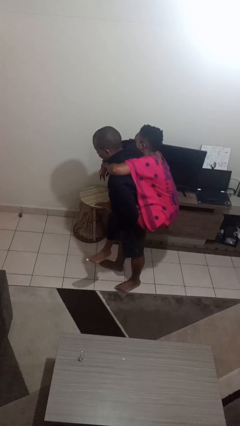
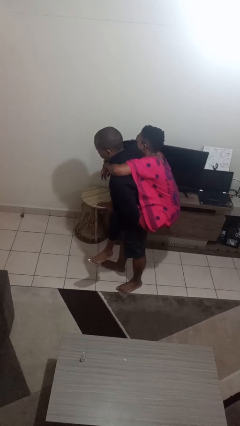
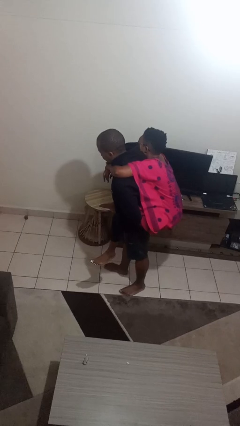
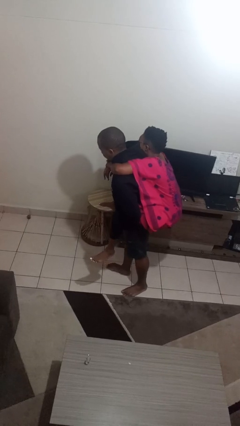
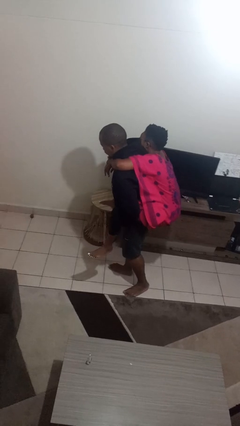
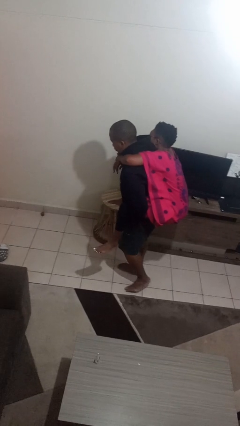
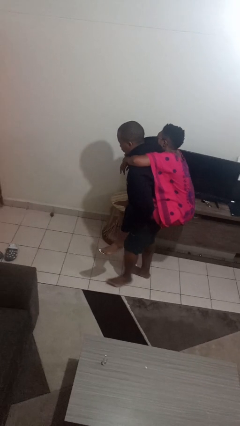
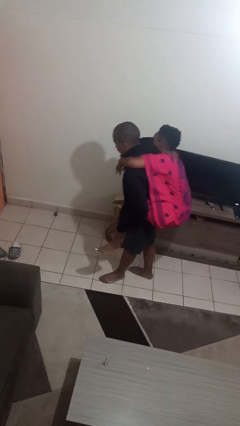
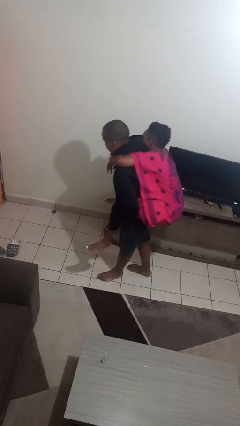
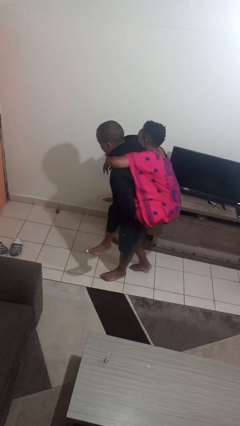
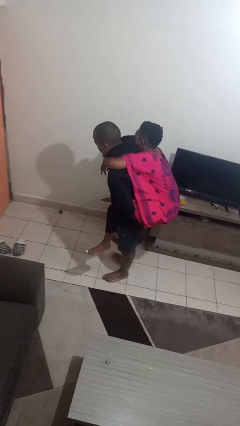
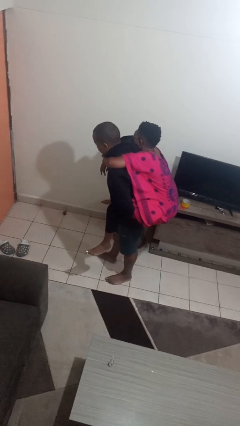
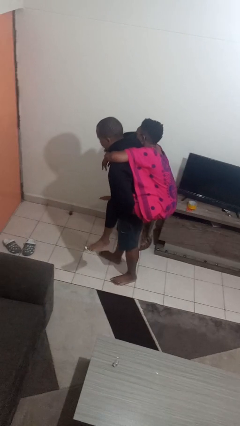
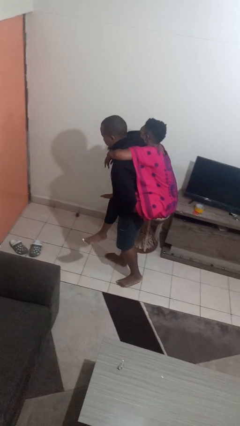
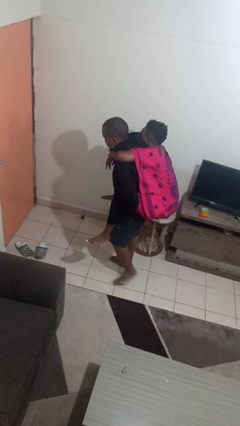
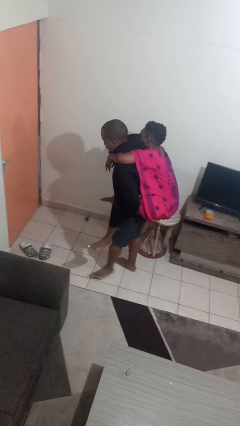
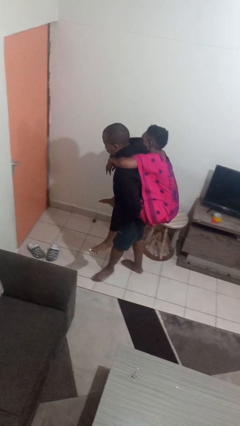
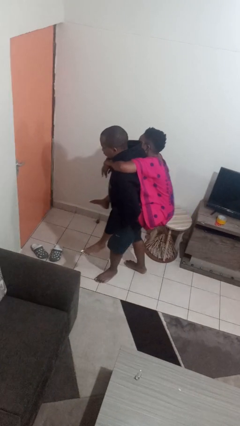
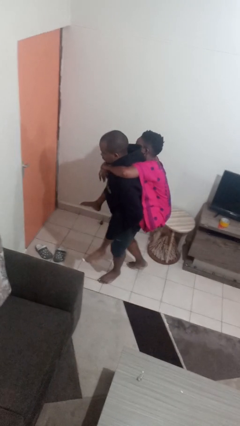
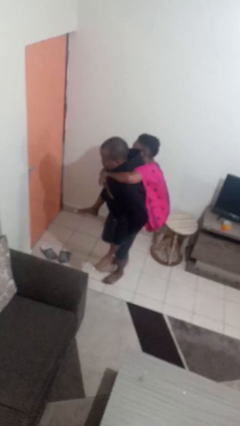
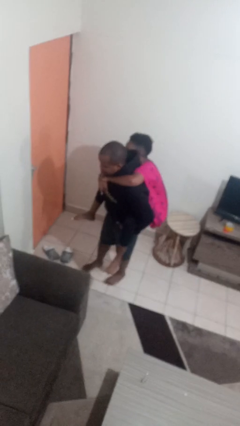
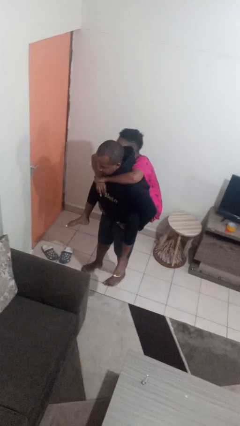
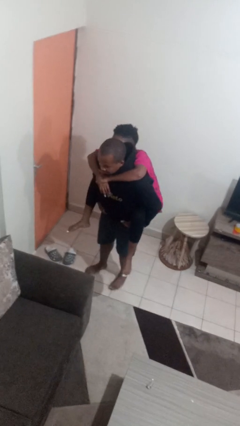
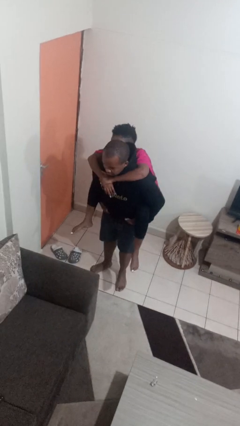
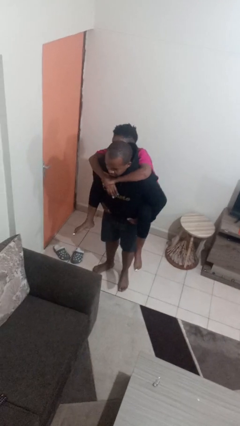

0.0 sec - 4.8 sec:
person carries person on back

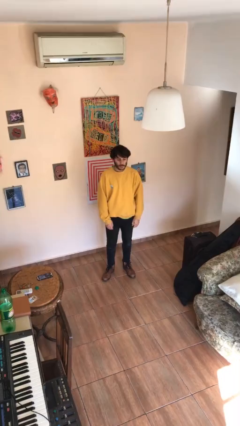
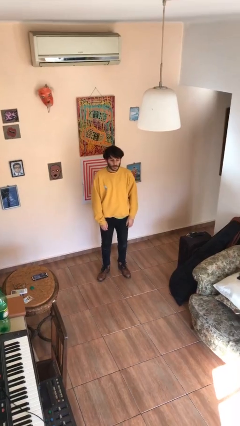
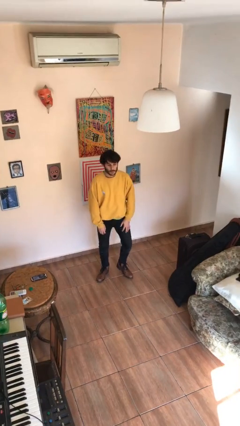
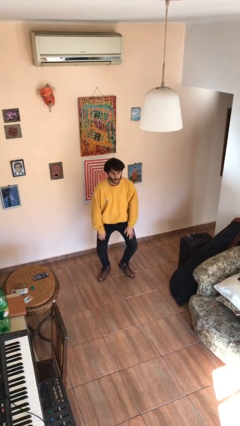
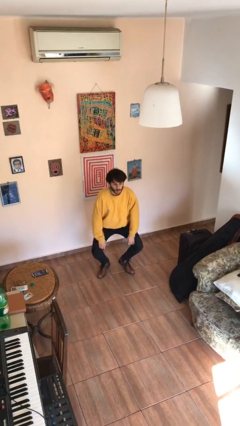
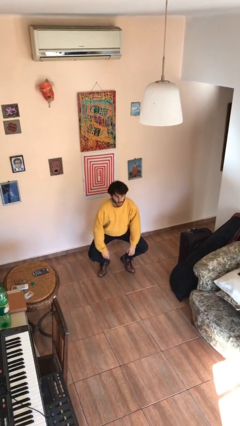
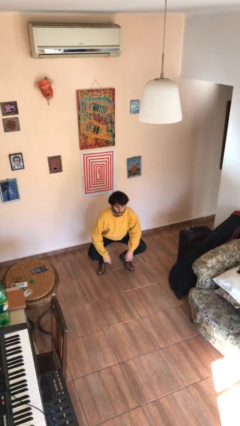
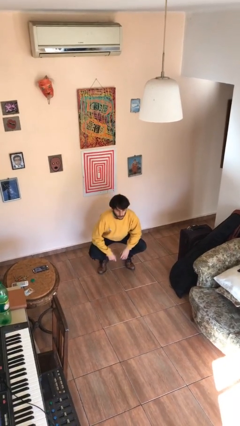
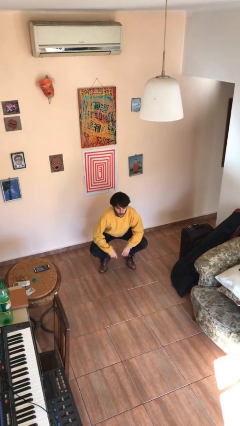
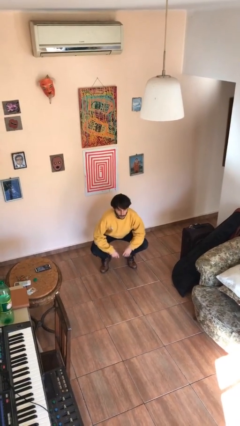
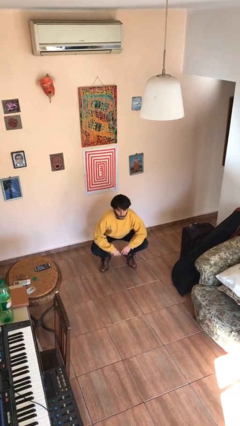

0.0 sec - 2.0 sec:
person squats

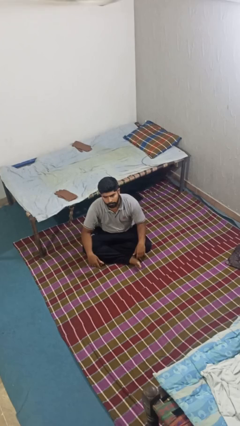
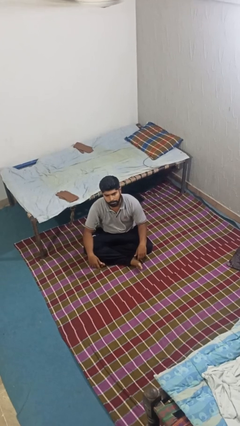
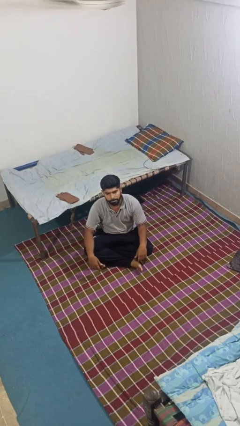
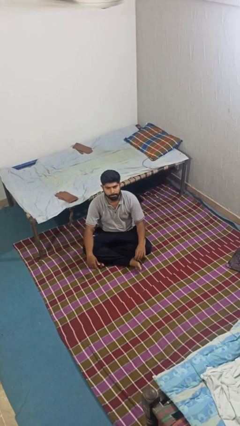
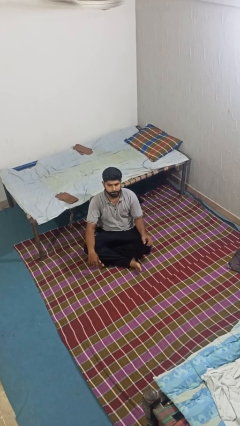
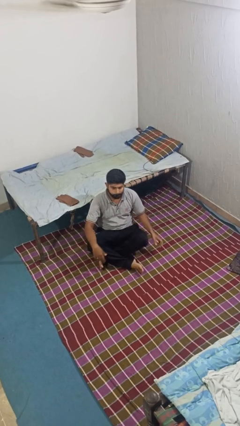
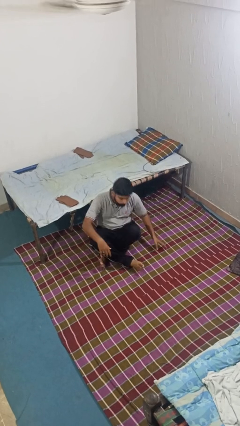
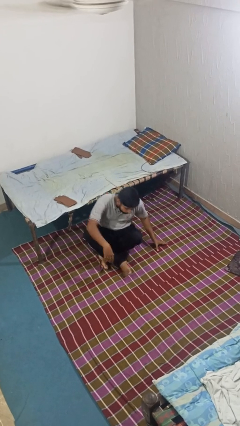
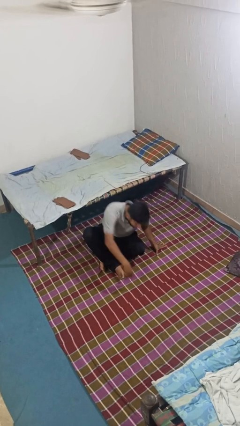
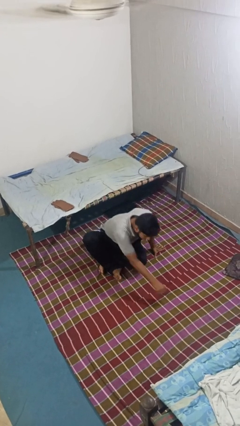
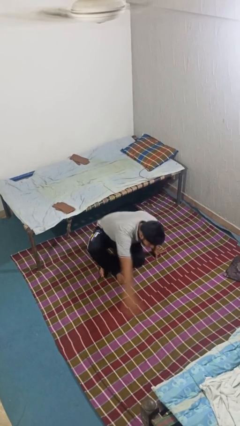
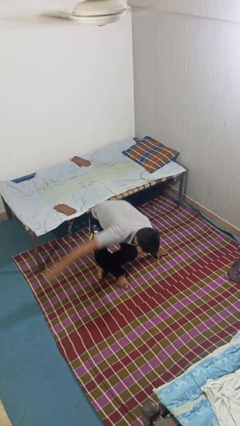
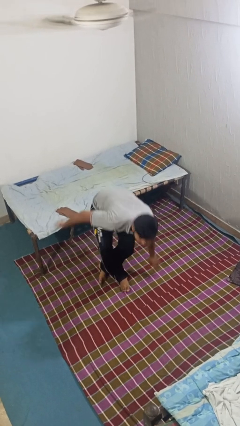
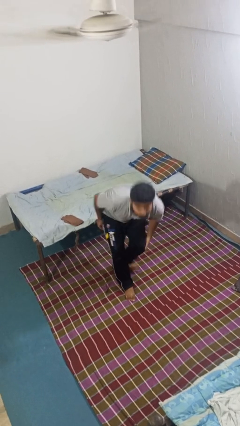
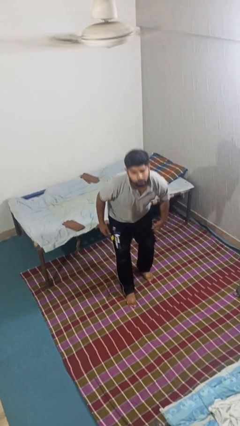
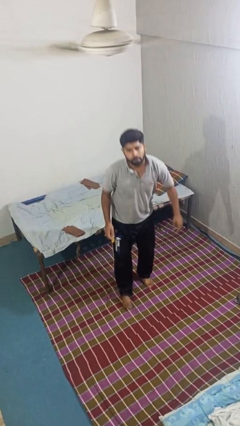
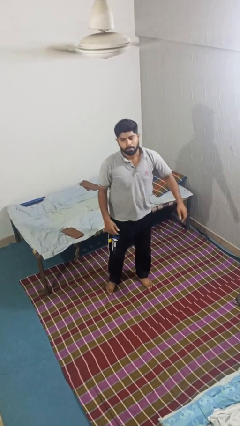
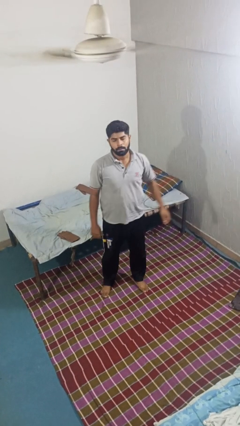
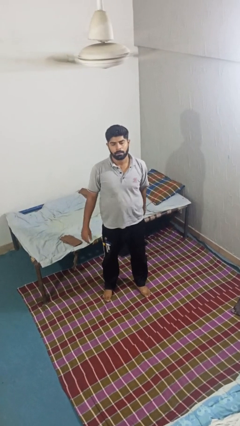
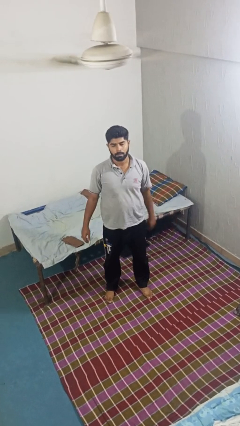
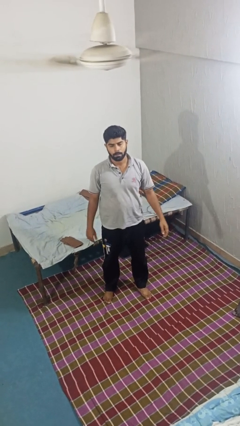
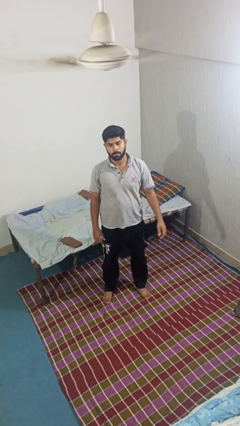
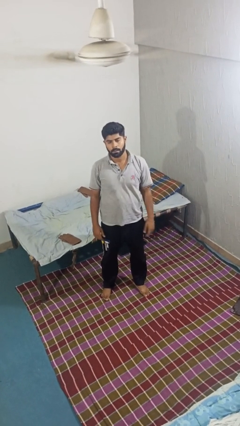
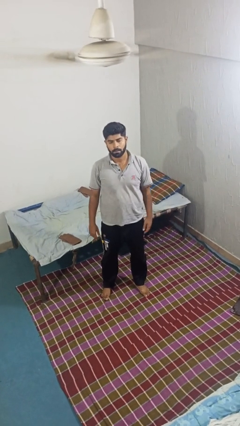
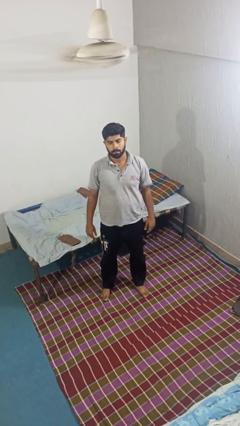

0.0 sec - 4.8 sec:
person stands up from floor
